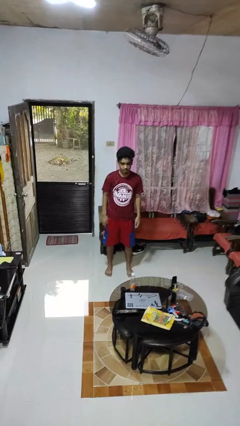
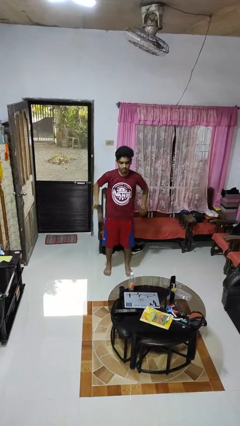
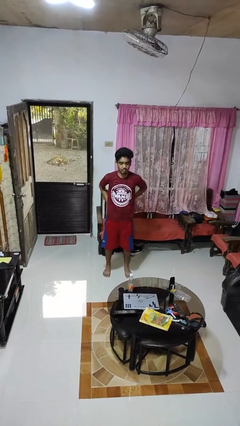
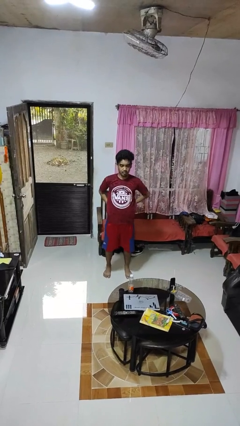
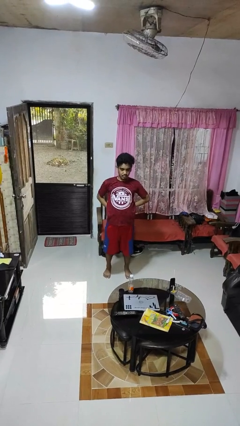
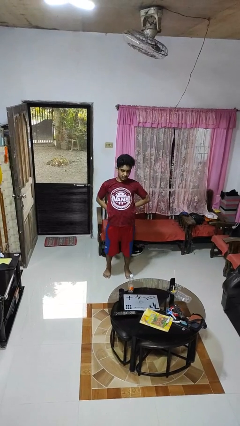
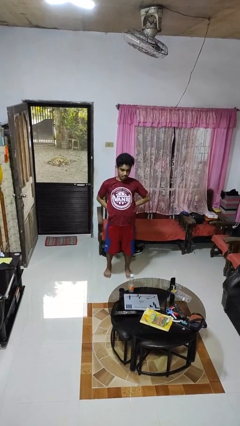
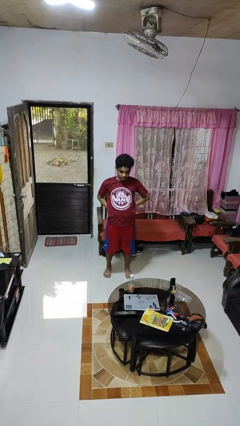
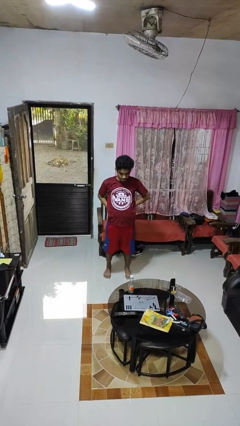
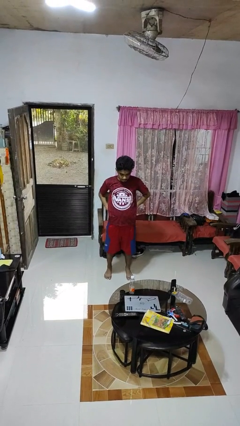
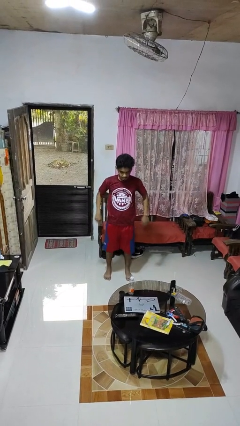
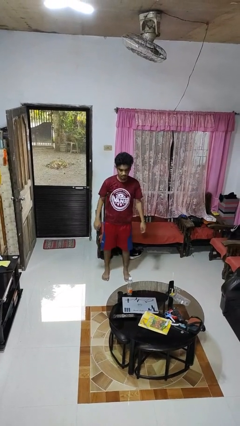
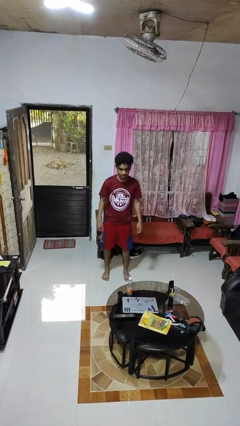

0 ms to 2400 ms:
person stretches back

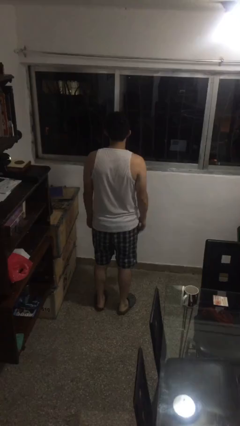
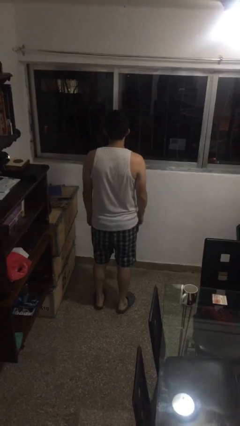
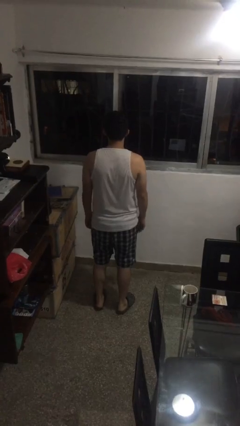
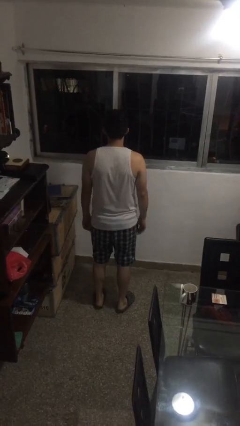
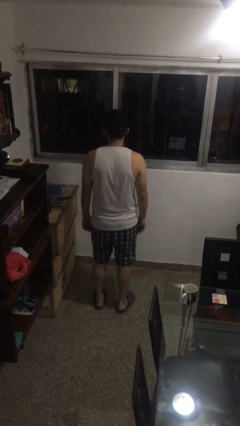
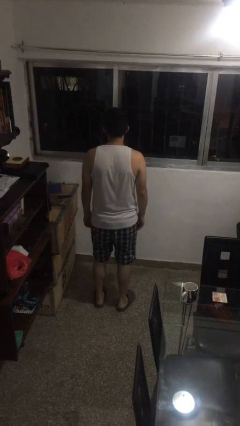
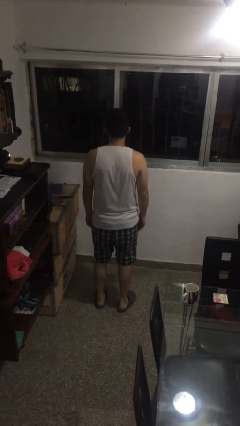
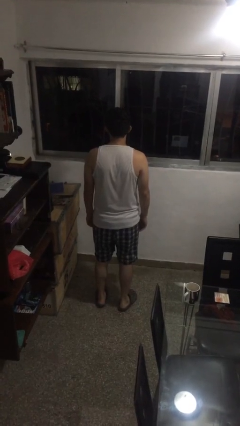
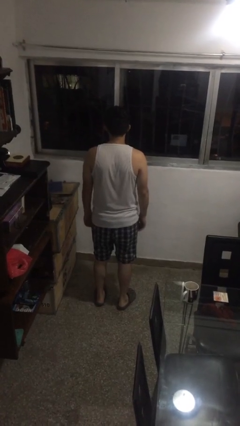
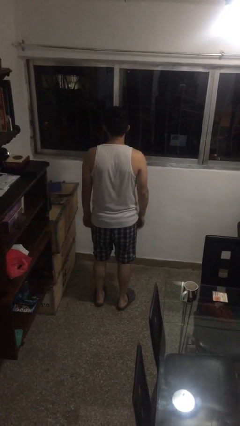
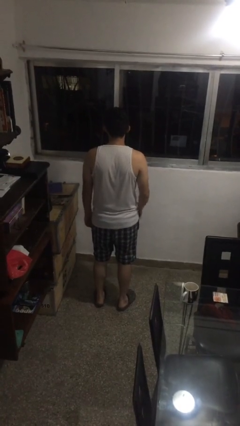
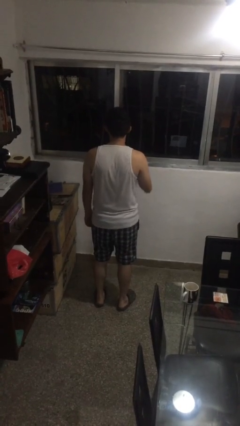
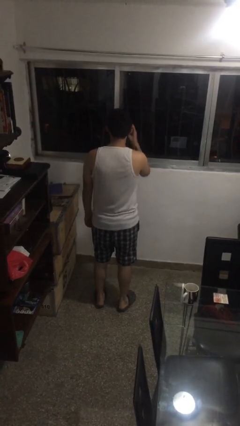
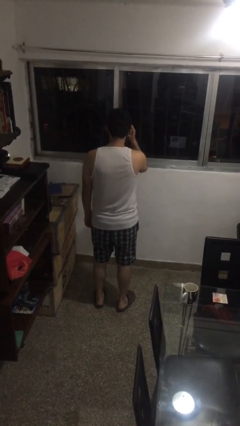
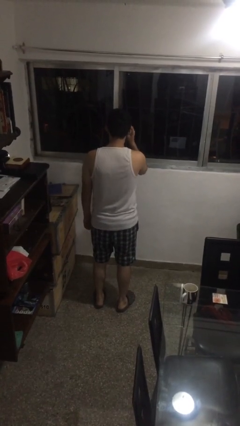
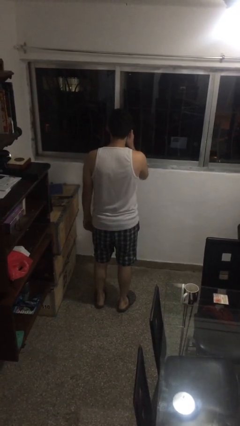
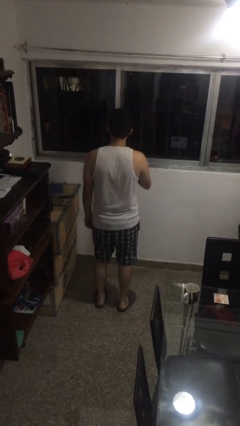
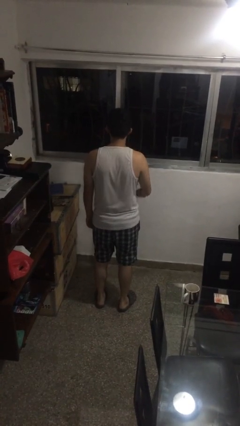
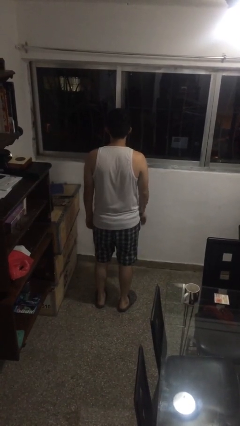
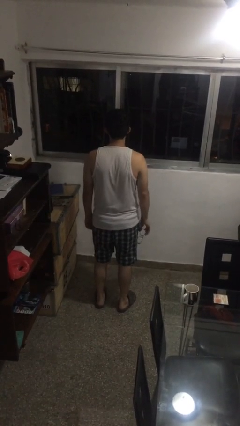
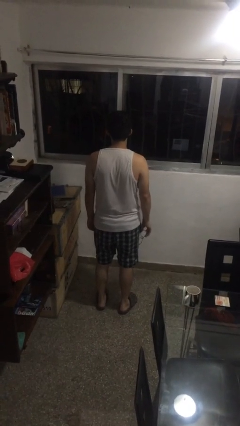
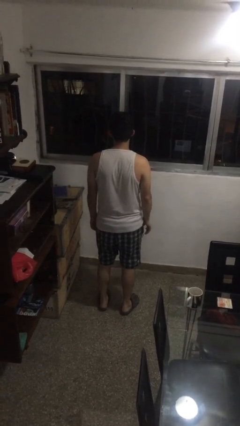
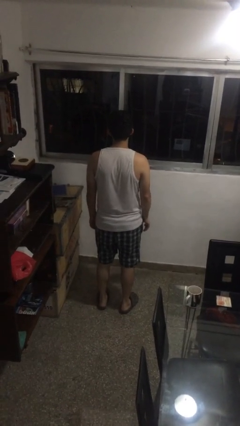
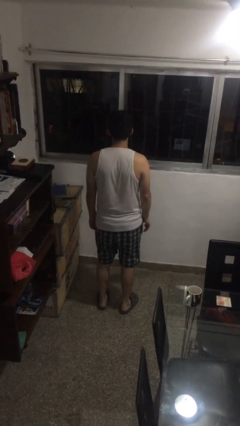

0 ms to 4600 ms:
person takes off glasses

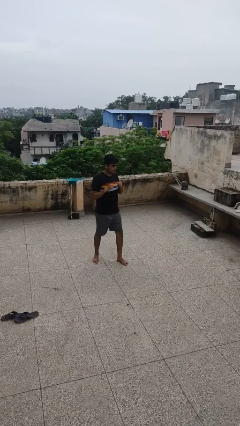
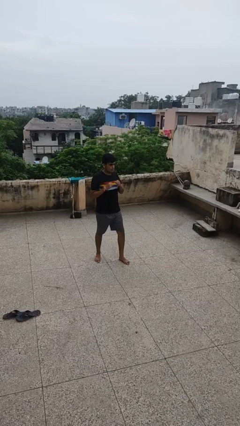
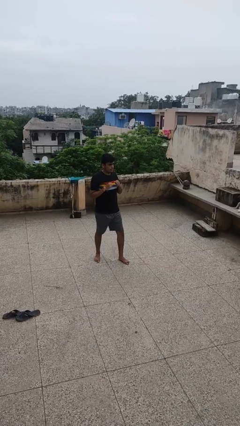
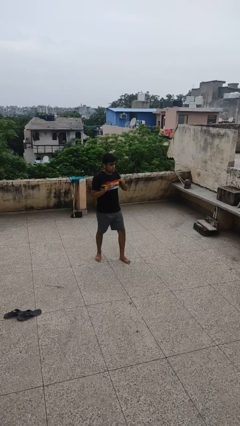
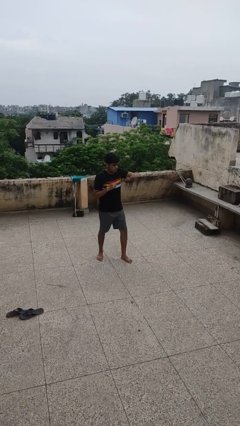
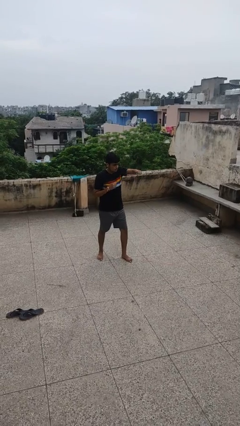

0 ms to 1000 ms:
person punches

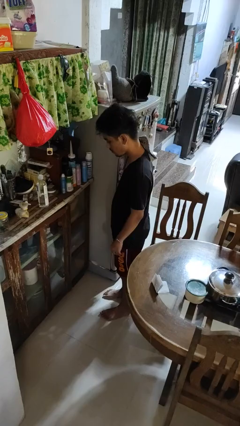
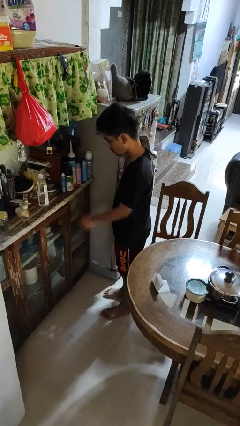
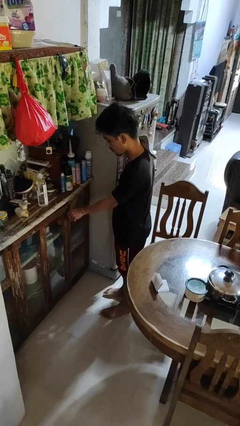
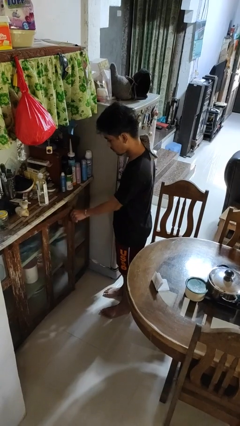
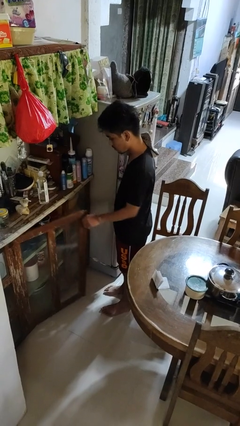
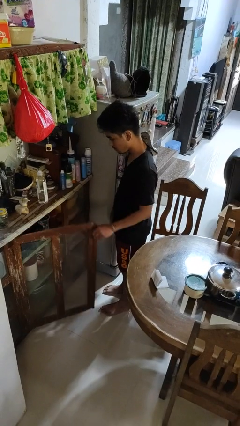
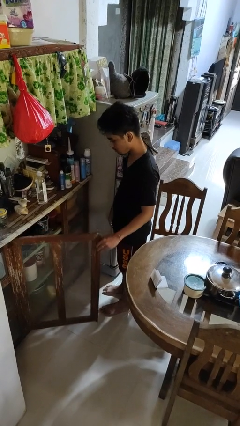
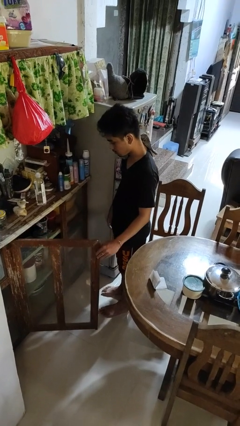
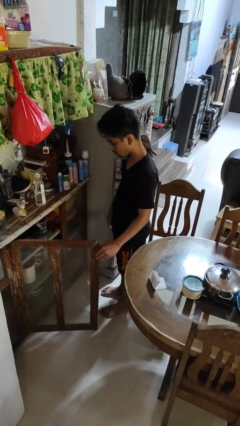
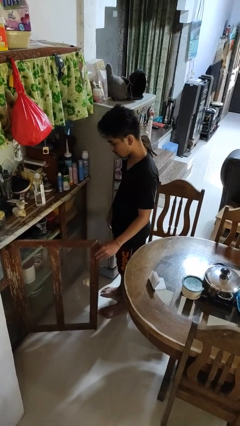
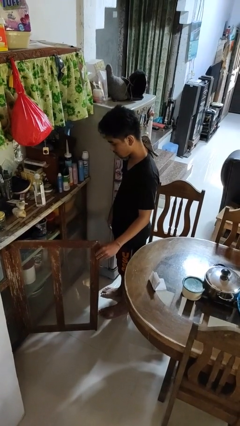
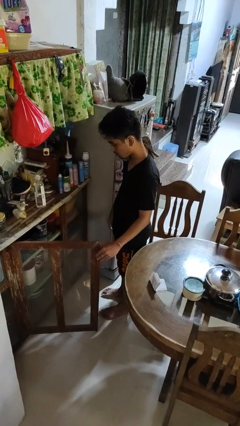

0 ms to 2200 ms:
person opens cabinet

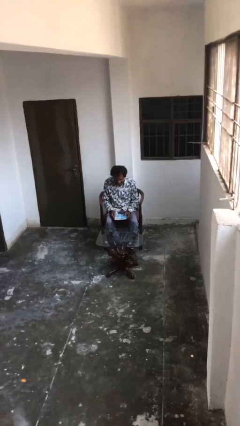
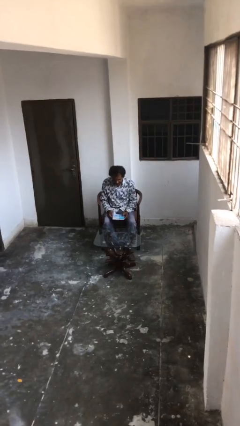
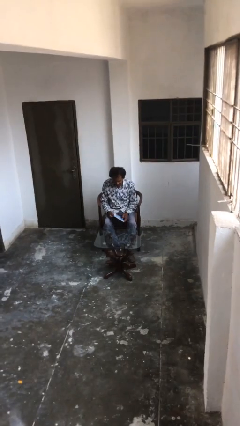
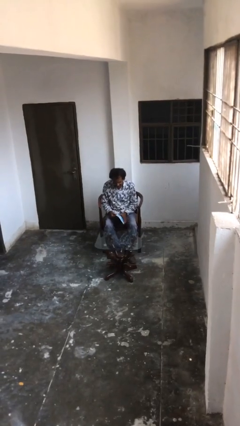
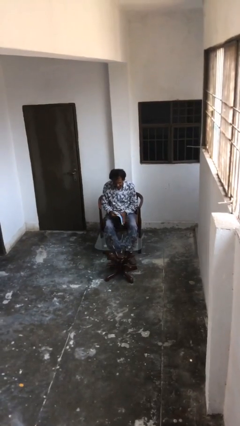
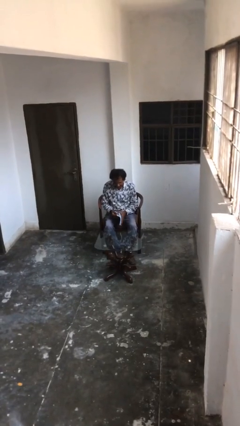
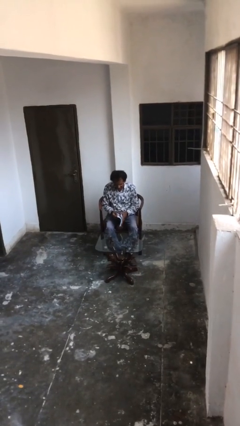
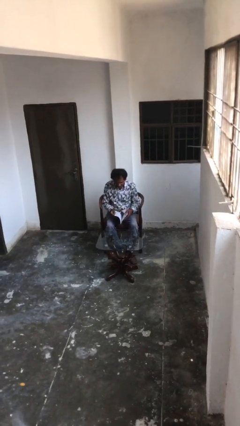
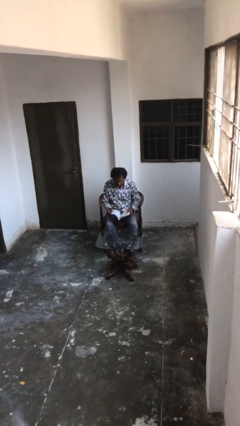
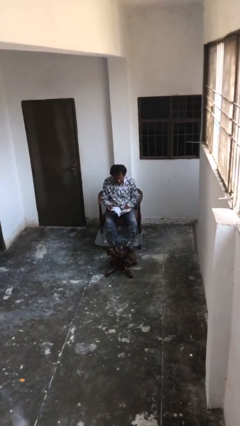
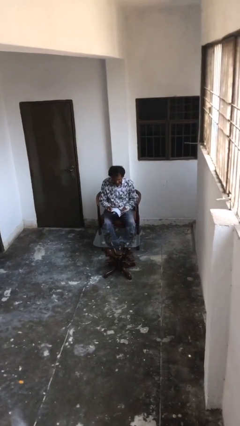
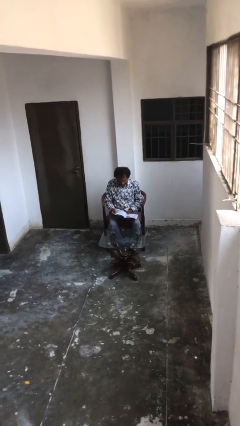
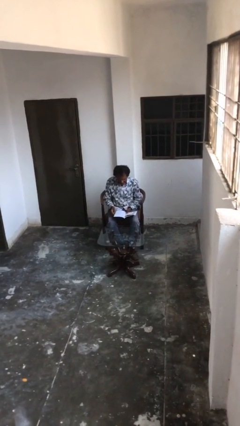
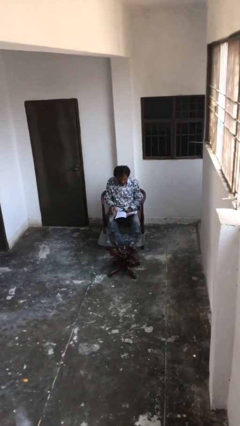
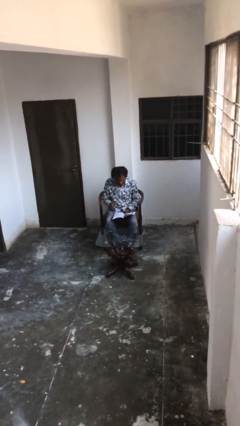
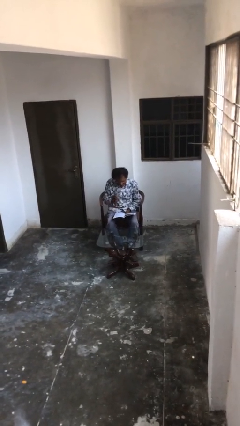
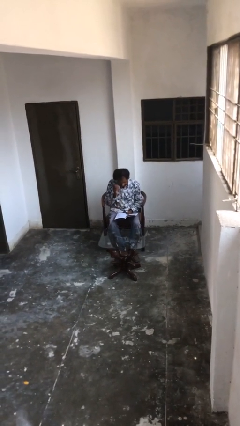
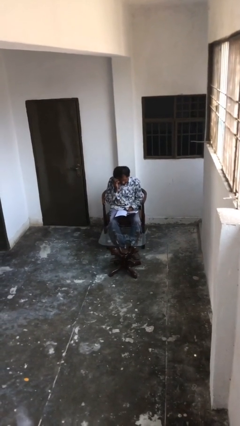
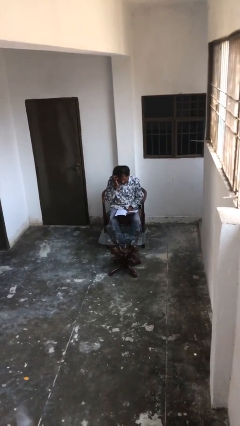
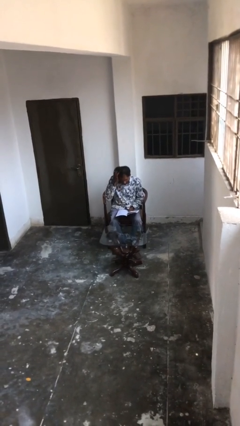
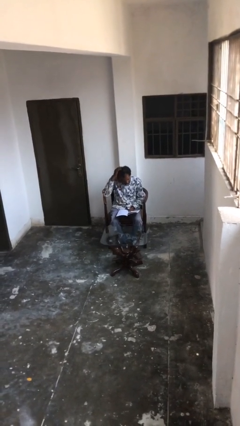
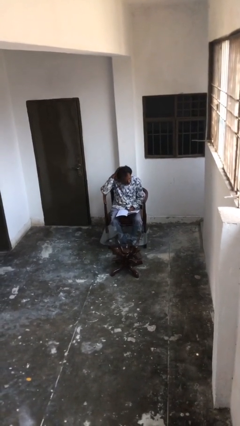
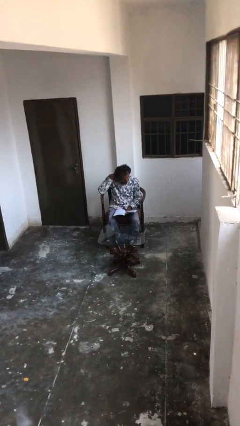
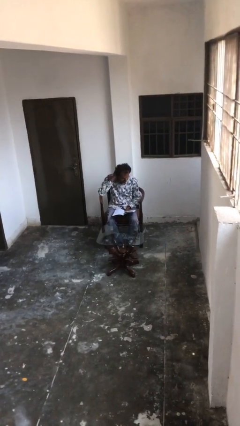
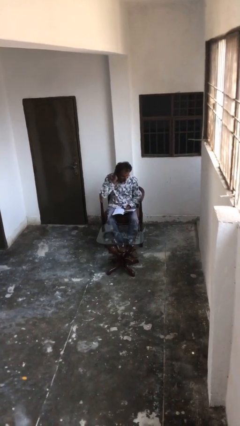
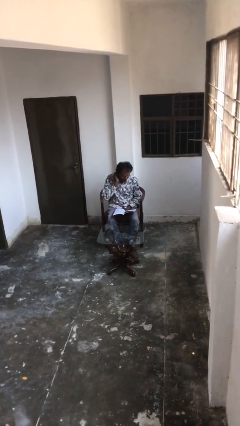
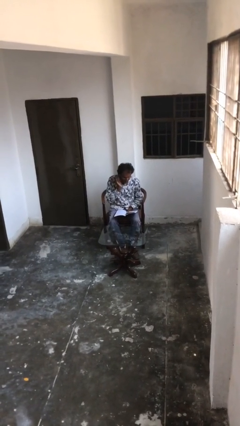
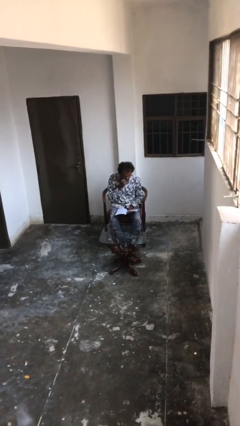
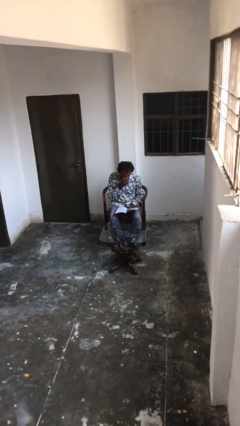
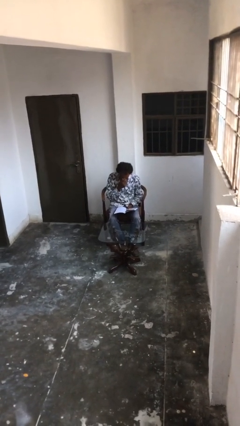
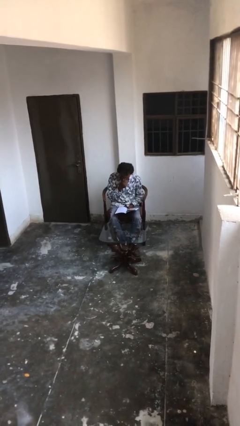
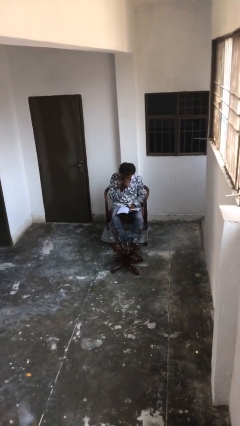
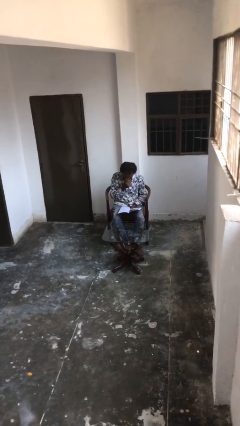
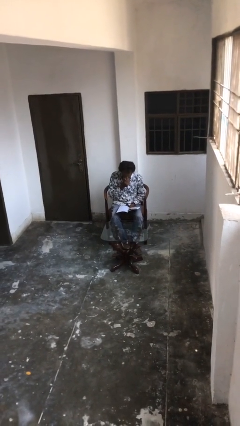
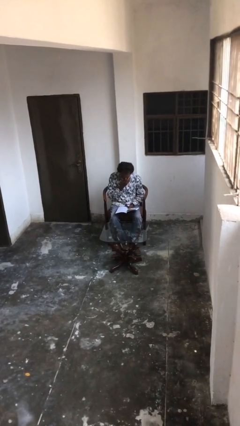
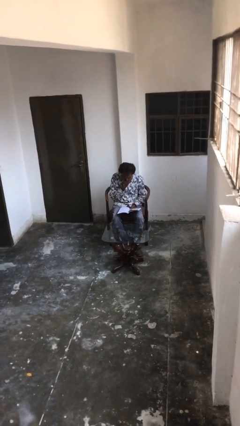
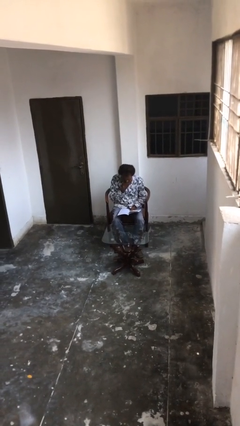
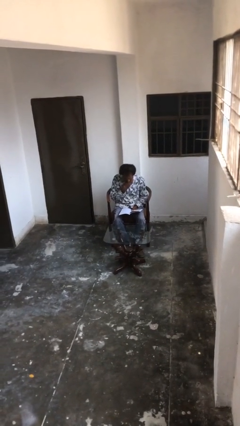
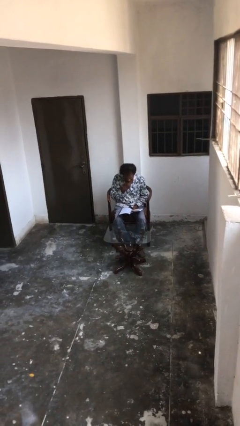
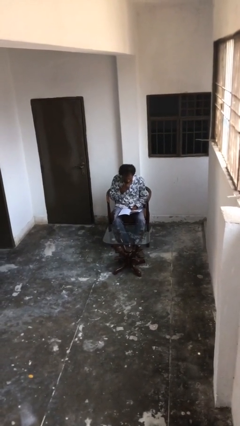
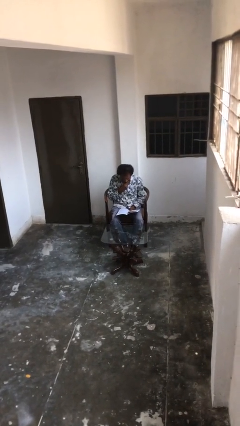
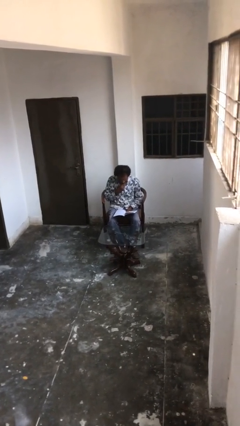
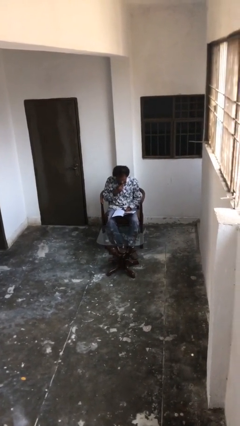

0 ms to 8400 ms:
person reads document
